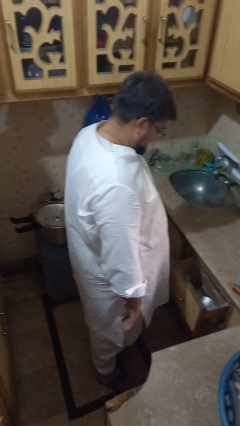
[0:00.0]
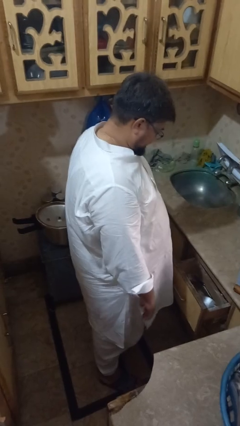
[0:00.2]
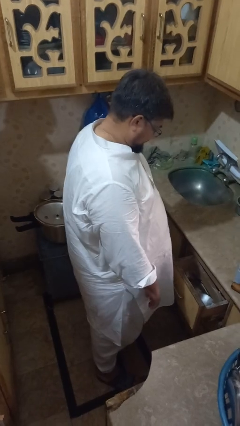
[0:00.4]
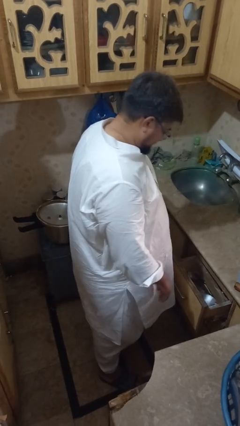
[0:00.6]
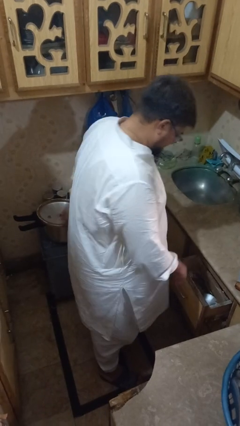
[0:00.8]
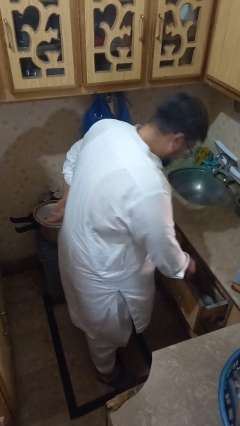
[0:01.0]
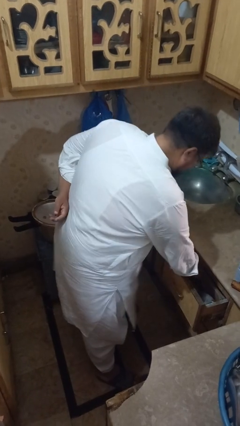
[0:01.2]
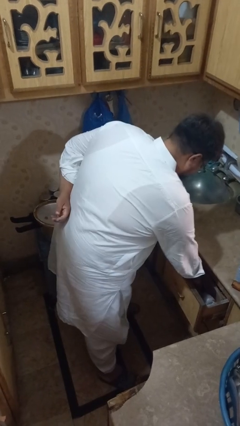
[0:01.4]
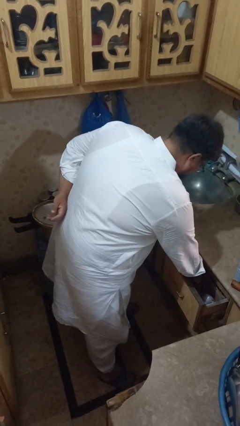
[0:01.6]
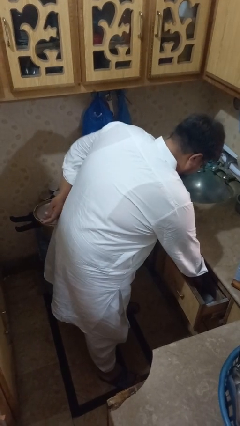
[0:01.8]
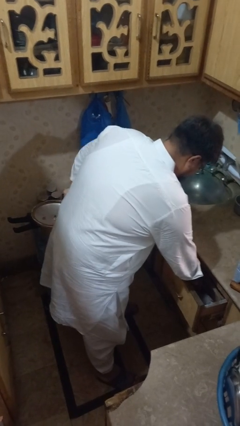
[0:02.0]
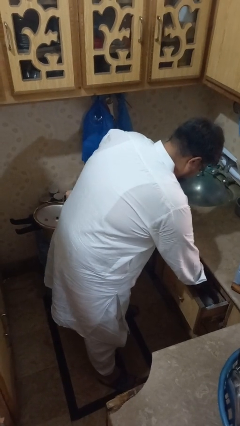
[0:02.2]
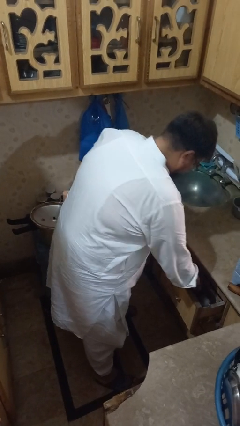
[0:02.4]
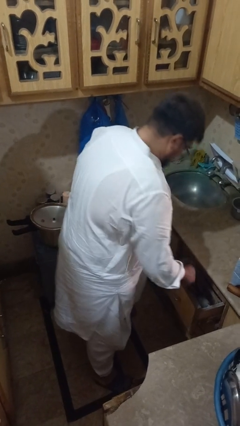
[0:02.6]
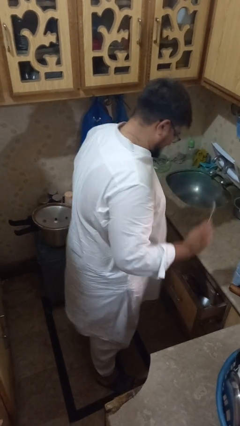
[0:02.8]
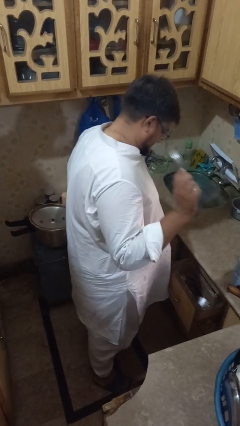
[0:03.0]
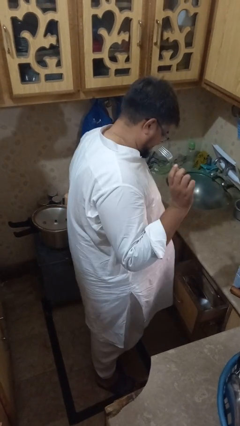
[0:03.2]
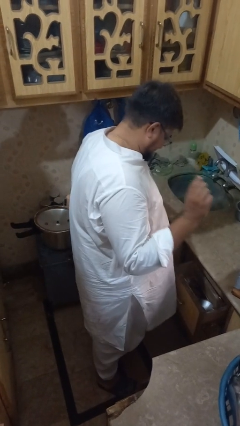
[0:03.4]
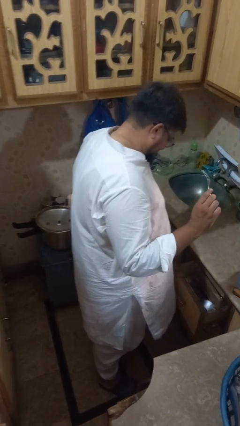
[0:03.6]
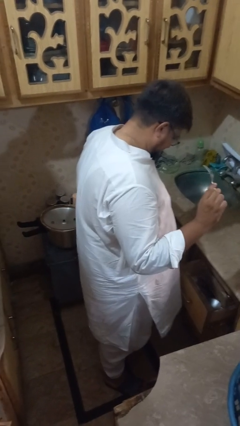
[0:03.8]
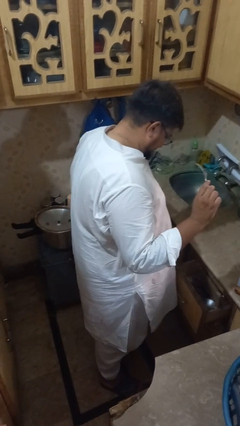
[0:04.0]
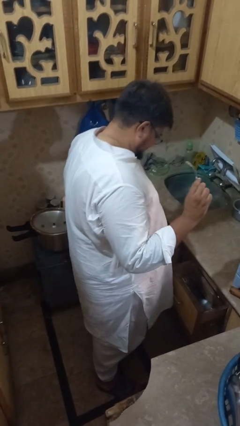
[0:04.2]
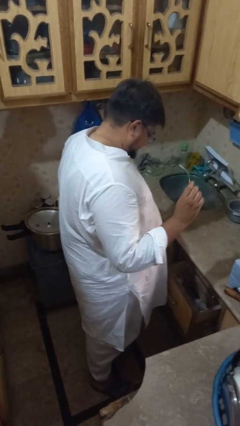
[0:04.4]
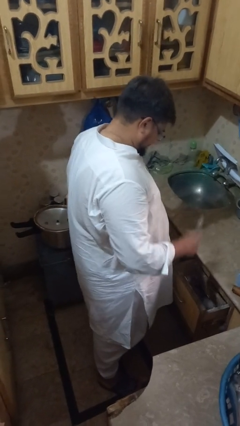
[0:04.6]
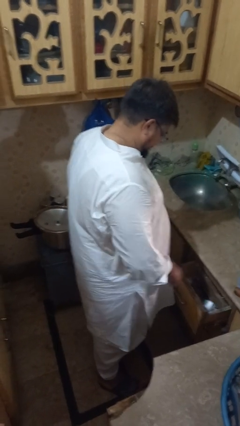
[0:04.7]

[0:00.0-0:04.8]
person searches in kitchen drawer

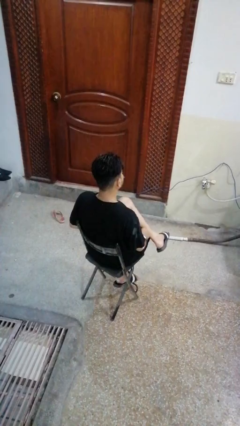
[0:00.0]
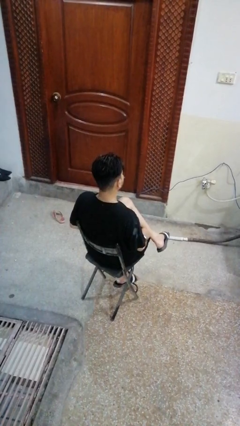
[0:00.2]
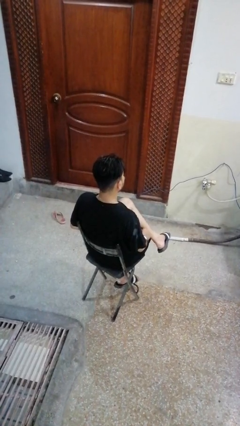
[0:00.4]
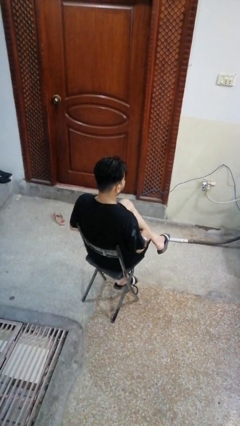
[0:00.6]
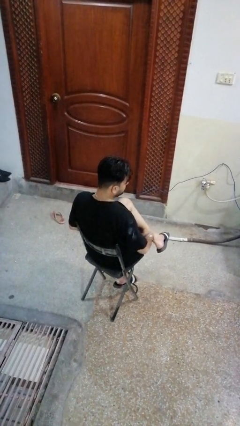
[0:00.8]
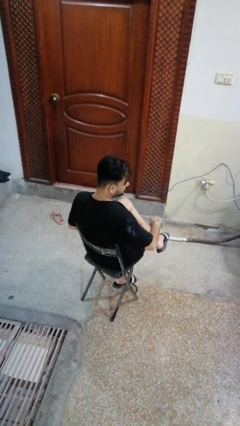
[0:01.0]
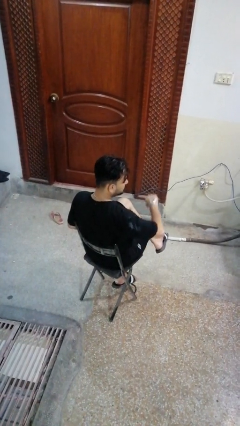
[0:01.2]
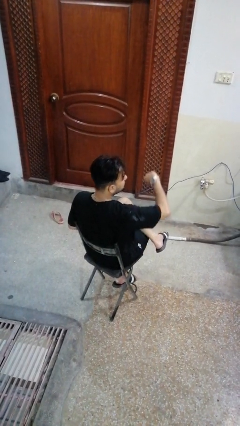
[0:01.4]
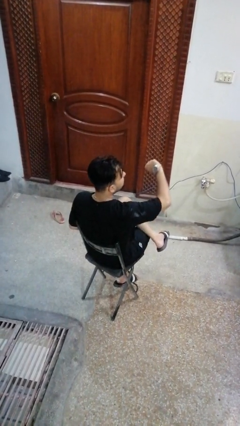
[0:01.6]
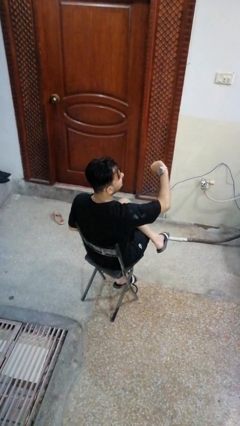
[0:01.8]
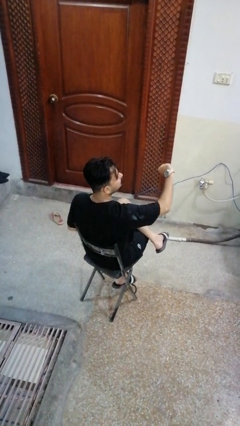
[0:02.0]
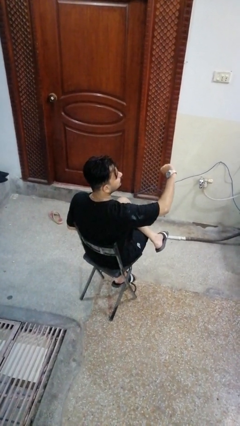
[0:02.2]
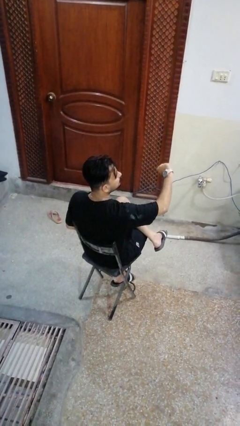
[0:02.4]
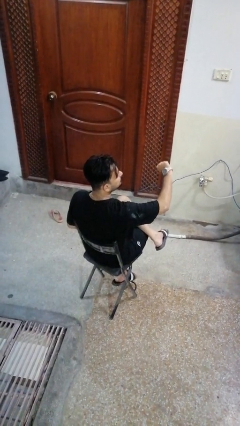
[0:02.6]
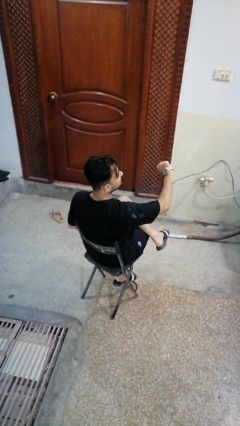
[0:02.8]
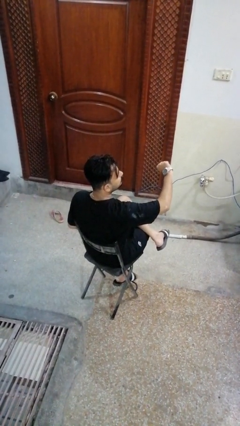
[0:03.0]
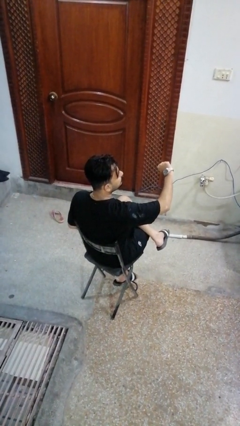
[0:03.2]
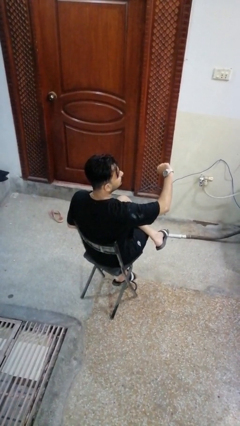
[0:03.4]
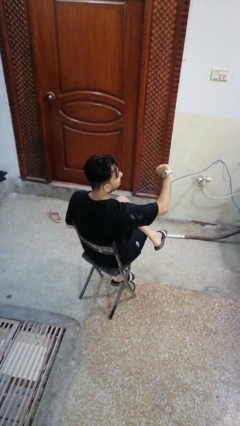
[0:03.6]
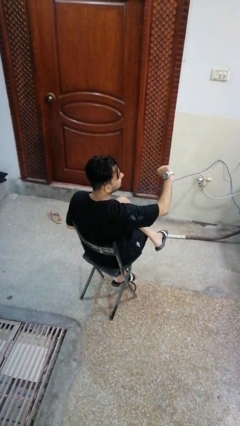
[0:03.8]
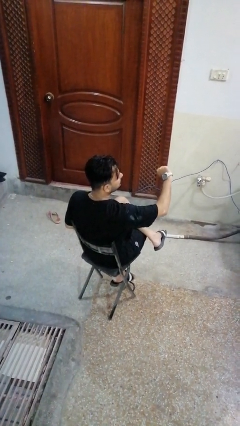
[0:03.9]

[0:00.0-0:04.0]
person looks at wristwatch

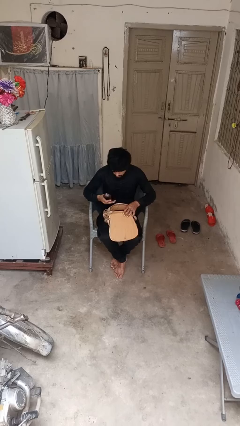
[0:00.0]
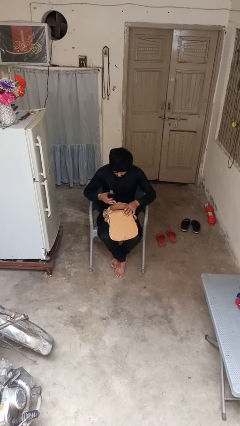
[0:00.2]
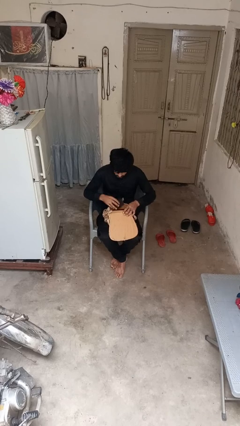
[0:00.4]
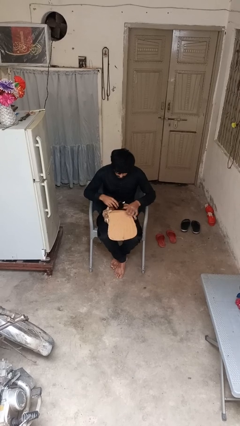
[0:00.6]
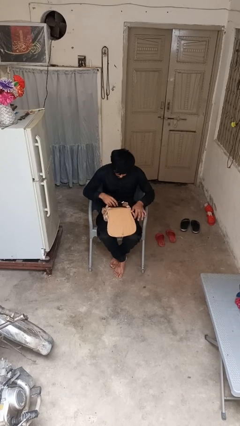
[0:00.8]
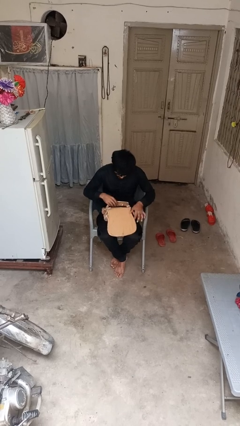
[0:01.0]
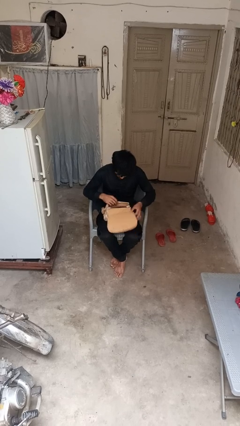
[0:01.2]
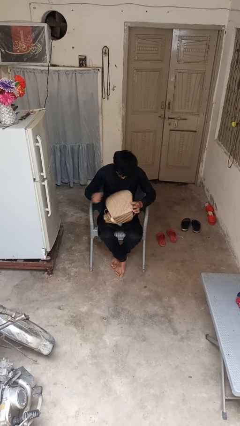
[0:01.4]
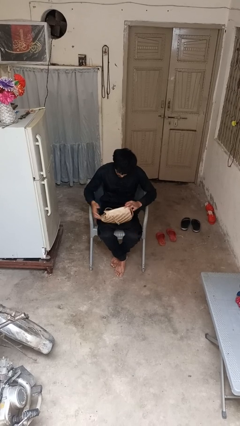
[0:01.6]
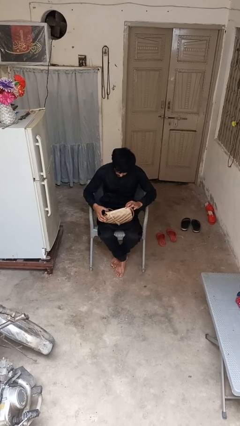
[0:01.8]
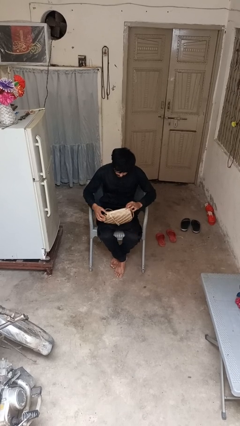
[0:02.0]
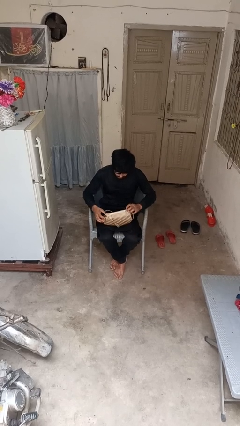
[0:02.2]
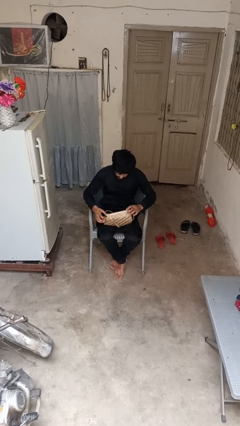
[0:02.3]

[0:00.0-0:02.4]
person puts object into purse

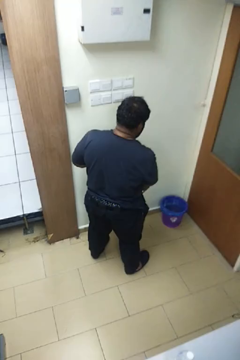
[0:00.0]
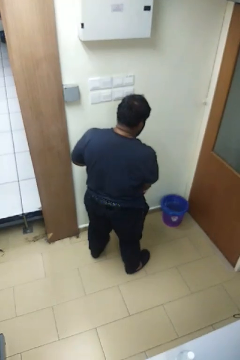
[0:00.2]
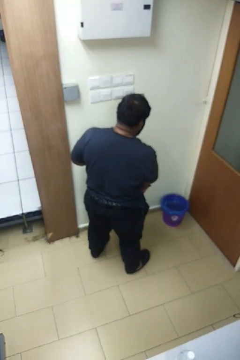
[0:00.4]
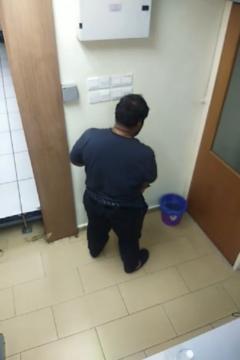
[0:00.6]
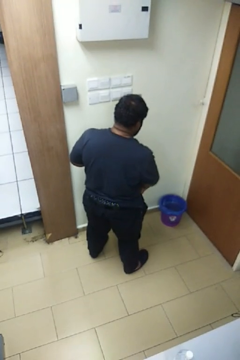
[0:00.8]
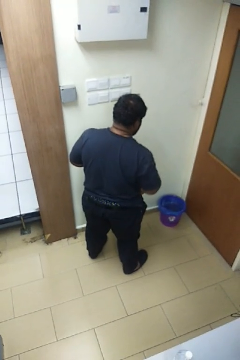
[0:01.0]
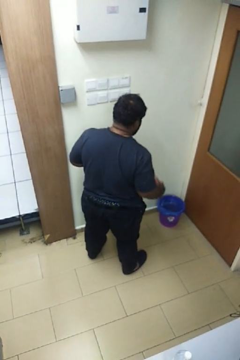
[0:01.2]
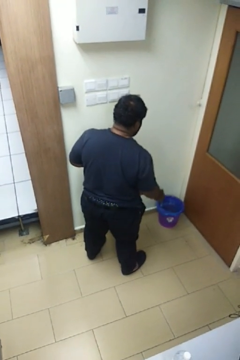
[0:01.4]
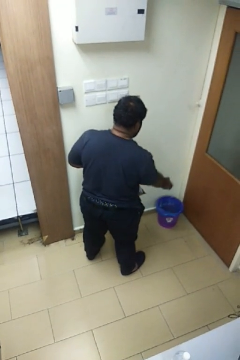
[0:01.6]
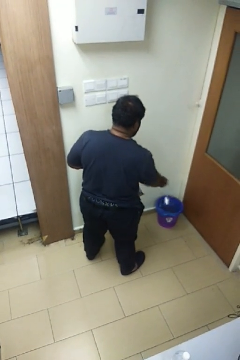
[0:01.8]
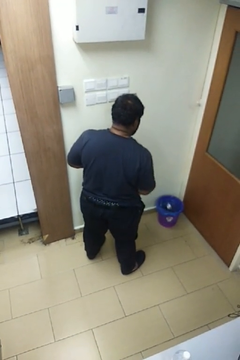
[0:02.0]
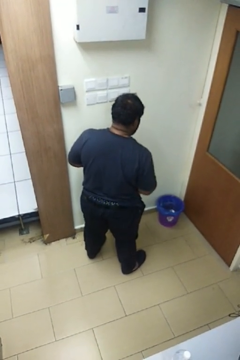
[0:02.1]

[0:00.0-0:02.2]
person discards trash

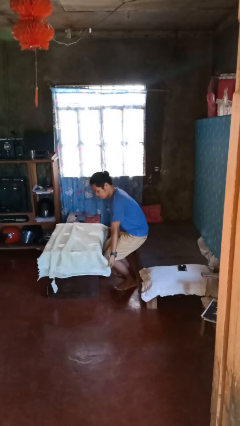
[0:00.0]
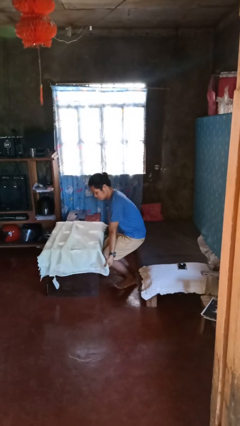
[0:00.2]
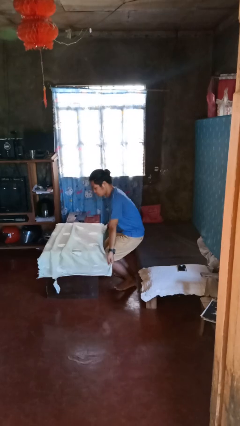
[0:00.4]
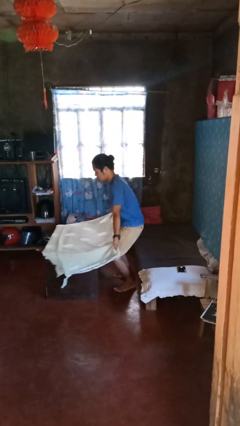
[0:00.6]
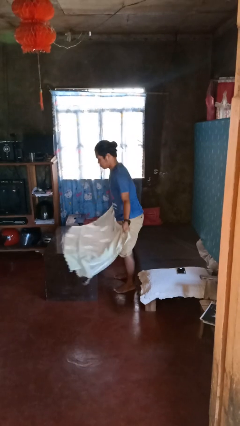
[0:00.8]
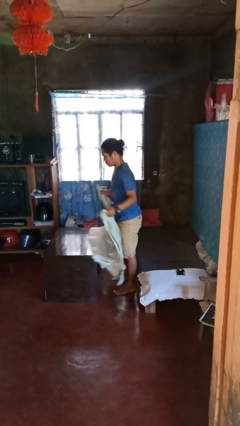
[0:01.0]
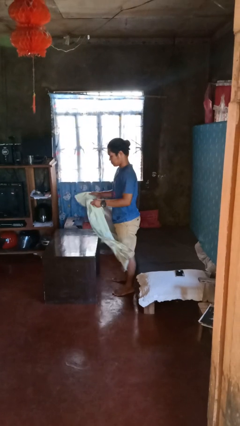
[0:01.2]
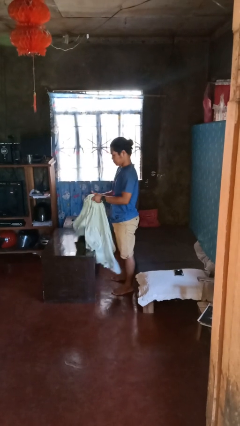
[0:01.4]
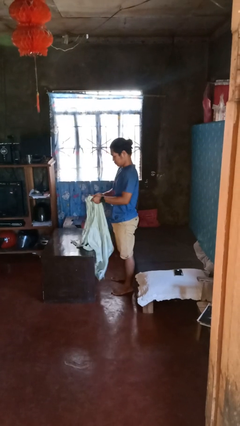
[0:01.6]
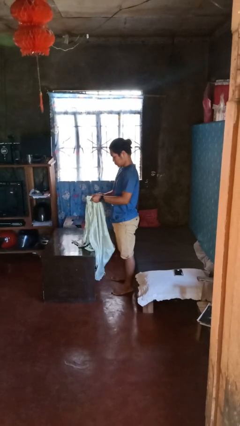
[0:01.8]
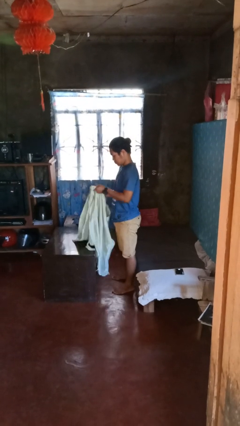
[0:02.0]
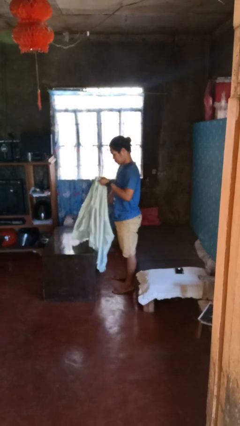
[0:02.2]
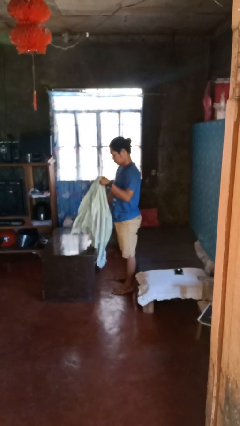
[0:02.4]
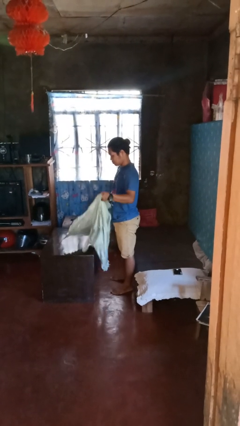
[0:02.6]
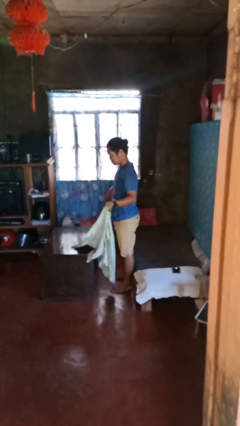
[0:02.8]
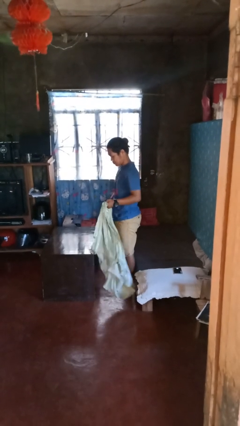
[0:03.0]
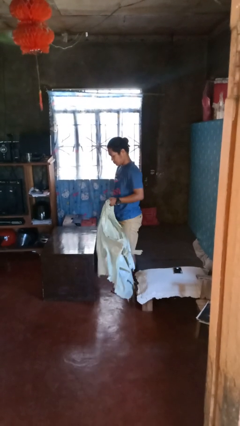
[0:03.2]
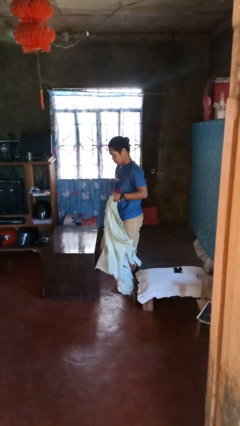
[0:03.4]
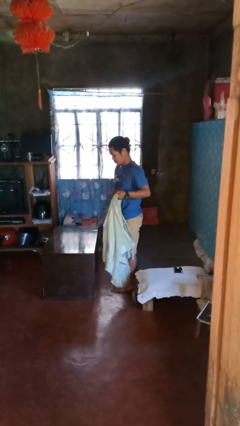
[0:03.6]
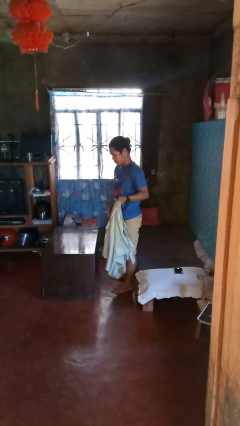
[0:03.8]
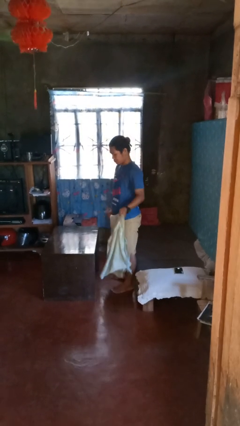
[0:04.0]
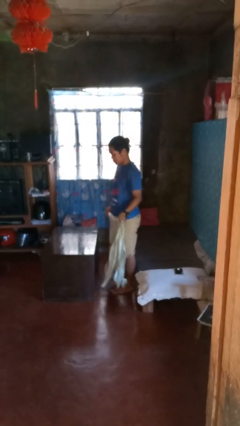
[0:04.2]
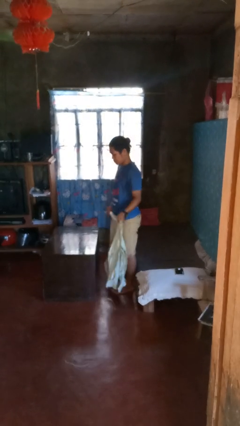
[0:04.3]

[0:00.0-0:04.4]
person folds tablecloth

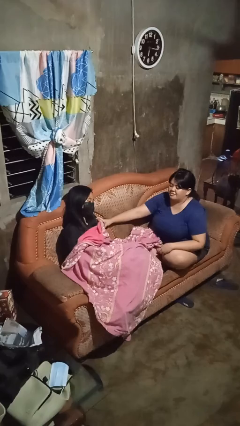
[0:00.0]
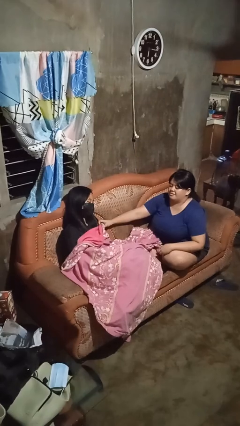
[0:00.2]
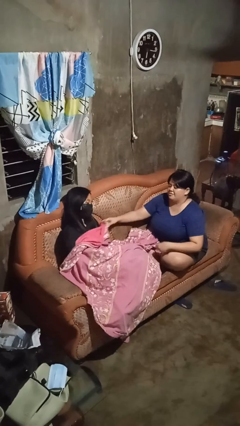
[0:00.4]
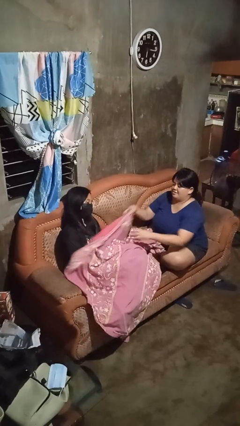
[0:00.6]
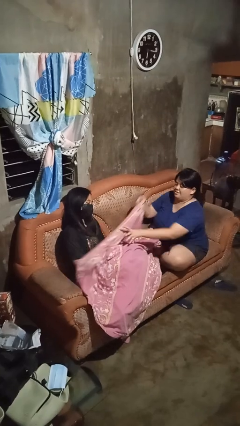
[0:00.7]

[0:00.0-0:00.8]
person uncovers friend with blanket
